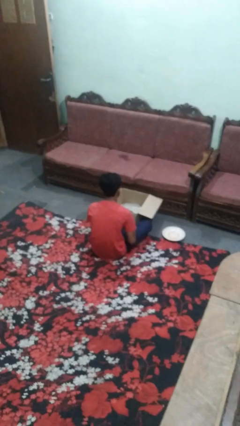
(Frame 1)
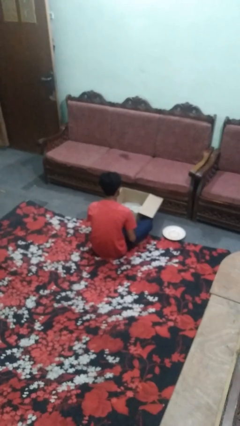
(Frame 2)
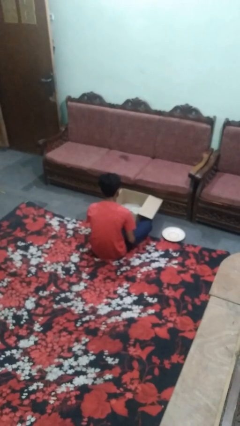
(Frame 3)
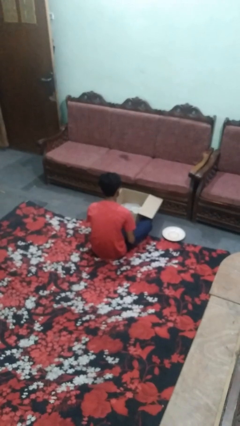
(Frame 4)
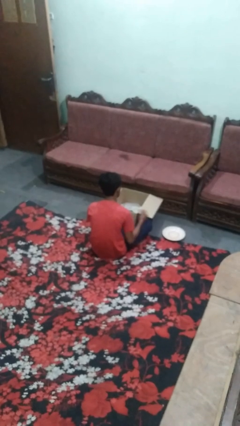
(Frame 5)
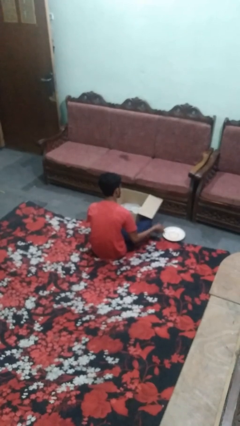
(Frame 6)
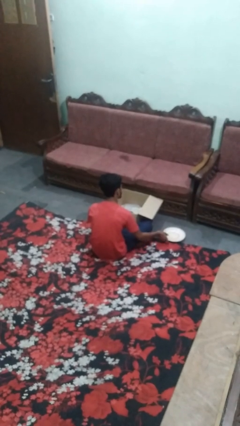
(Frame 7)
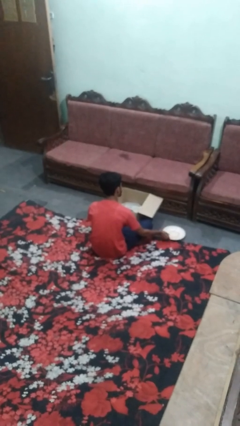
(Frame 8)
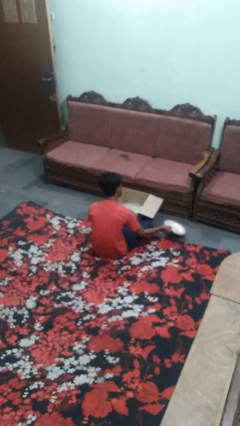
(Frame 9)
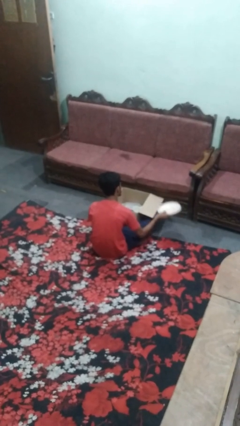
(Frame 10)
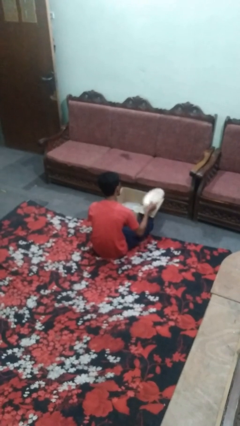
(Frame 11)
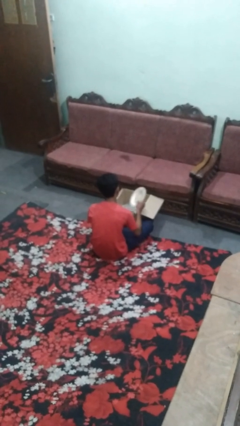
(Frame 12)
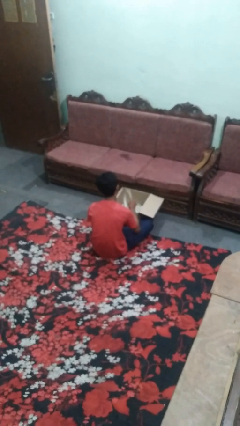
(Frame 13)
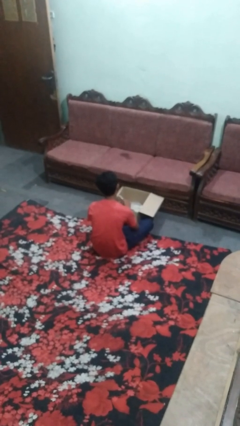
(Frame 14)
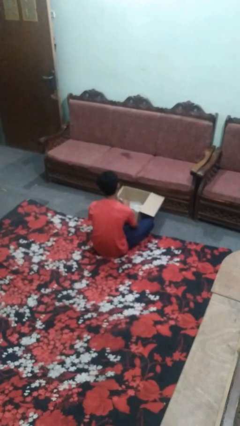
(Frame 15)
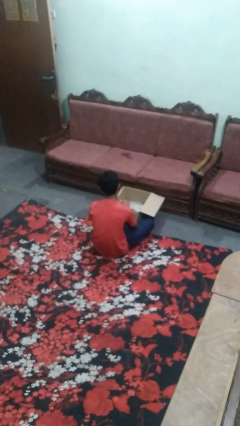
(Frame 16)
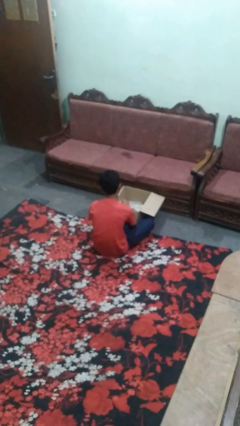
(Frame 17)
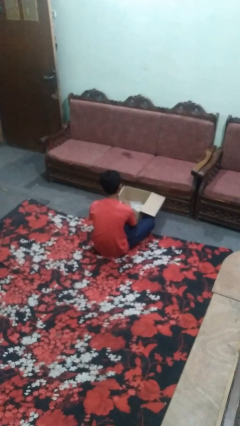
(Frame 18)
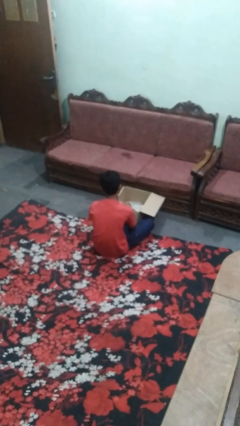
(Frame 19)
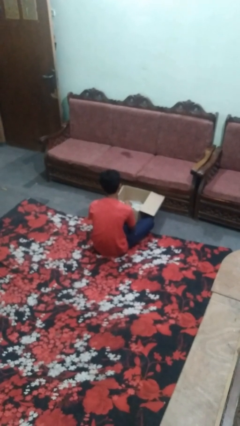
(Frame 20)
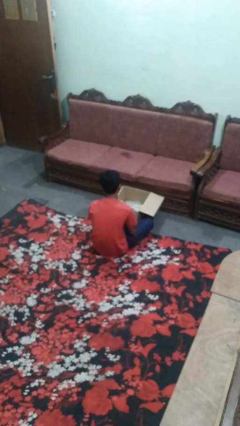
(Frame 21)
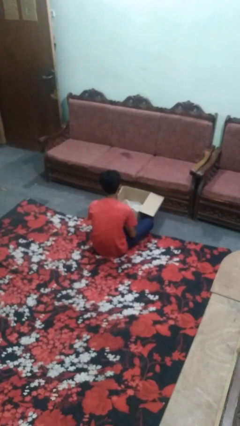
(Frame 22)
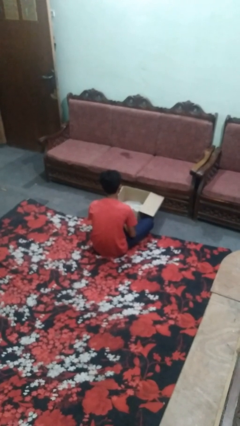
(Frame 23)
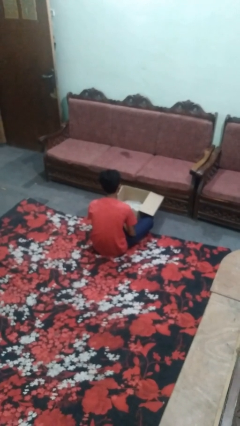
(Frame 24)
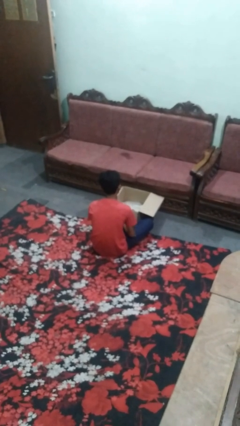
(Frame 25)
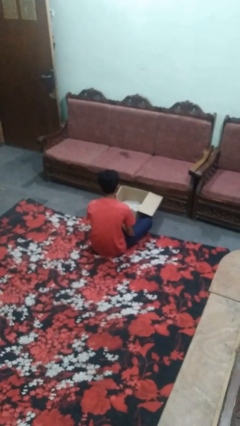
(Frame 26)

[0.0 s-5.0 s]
person puts object into box

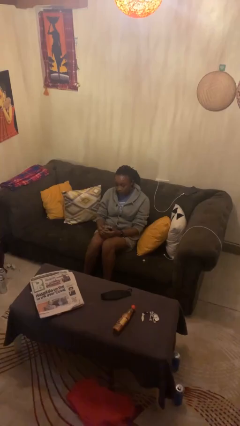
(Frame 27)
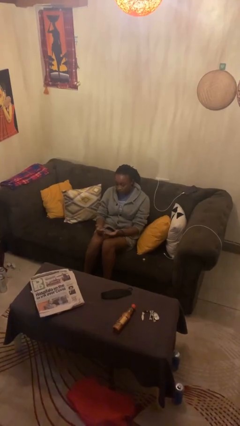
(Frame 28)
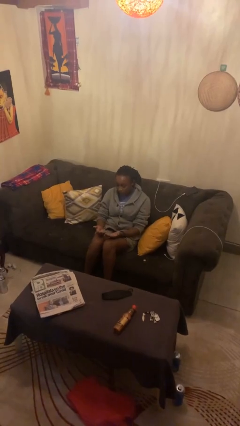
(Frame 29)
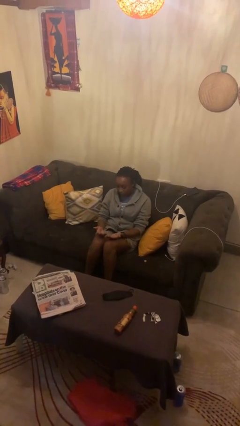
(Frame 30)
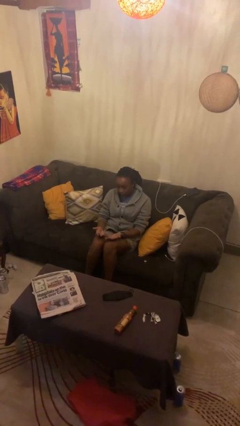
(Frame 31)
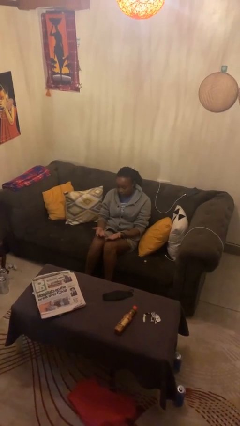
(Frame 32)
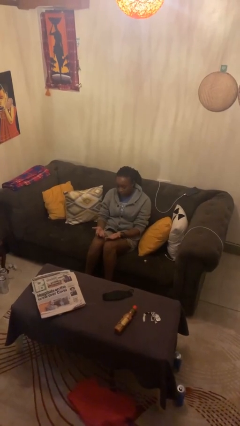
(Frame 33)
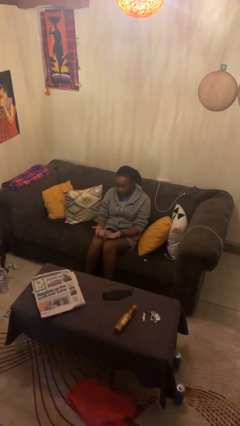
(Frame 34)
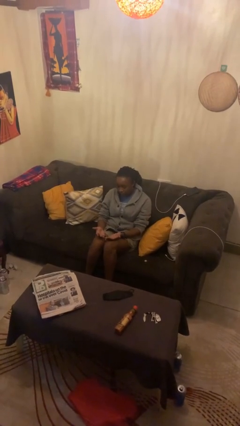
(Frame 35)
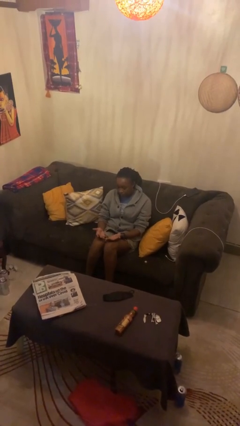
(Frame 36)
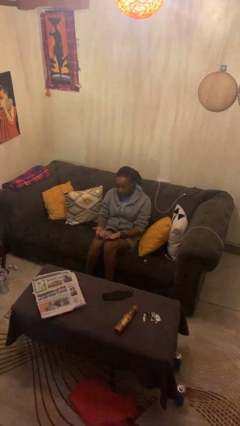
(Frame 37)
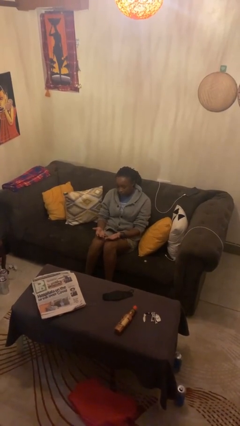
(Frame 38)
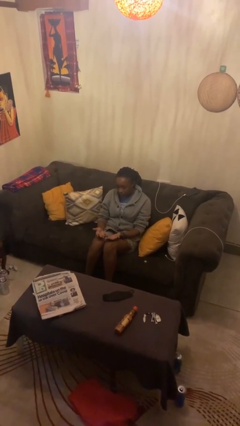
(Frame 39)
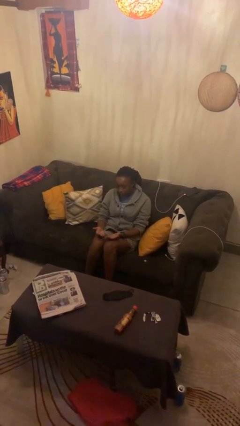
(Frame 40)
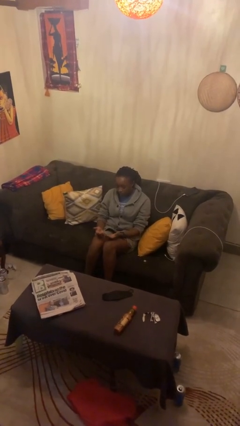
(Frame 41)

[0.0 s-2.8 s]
person looks at hands in lap

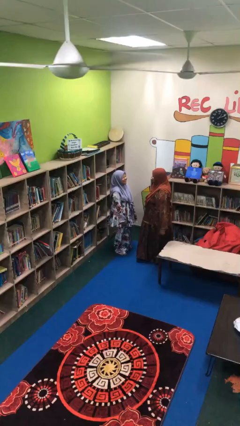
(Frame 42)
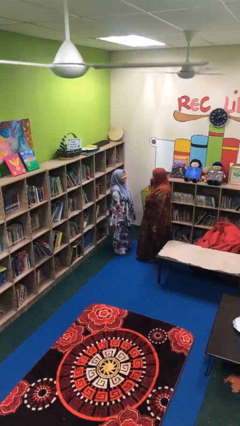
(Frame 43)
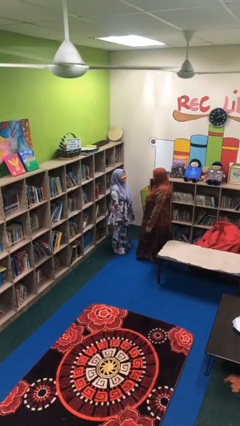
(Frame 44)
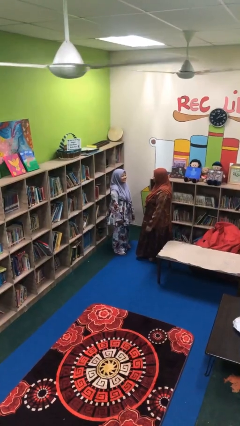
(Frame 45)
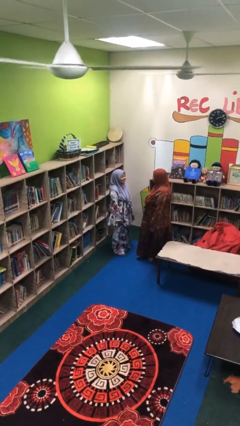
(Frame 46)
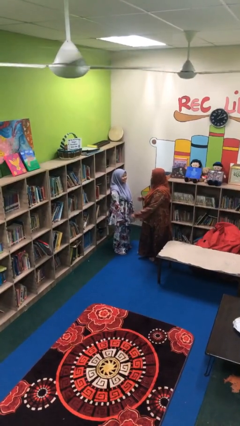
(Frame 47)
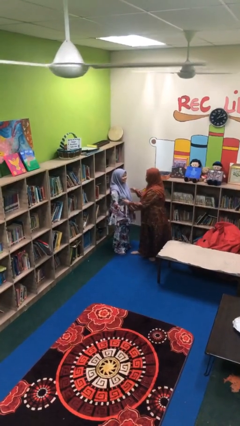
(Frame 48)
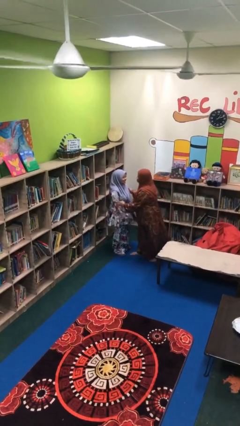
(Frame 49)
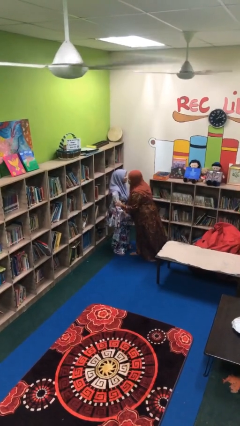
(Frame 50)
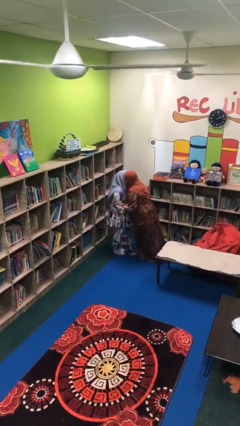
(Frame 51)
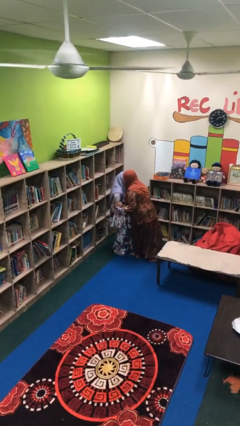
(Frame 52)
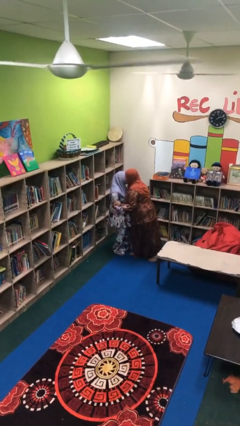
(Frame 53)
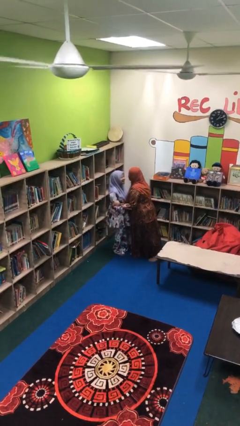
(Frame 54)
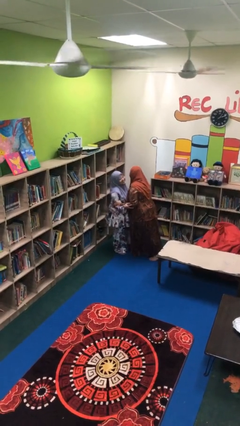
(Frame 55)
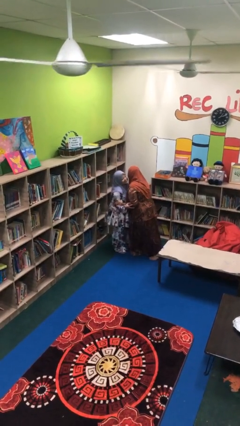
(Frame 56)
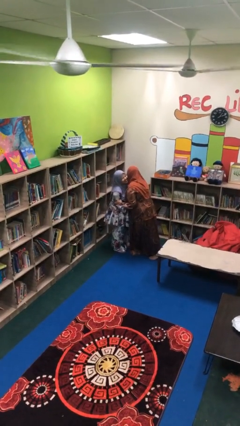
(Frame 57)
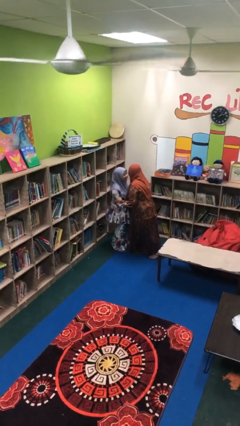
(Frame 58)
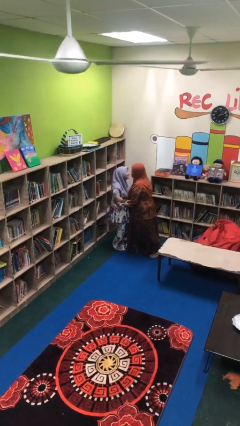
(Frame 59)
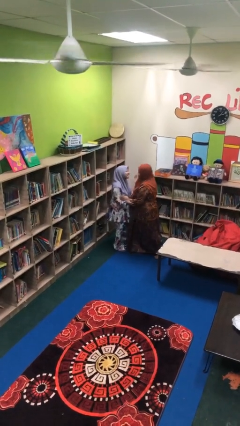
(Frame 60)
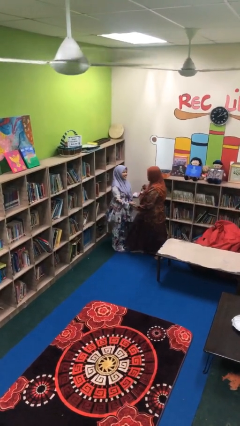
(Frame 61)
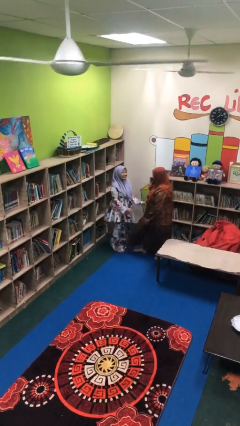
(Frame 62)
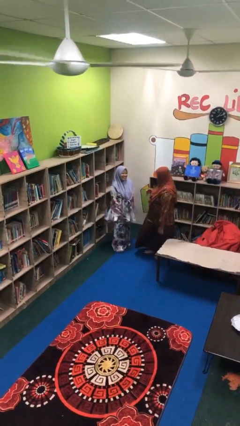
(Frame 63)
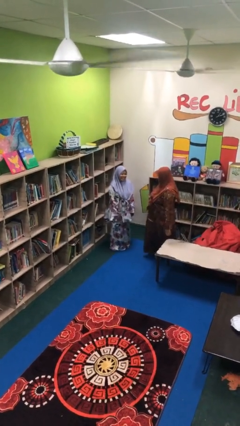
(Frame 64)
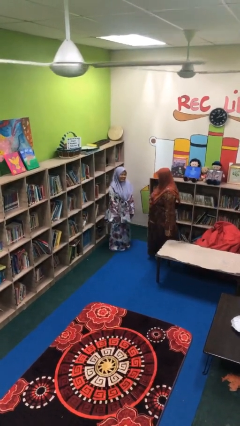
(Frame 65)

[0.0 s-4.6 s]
person embraces person

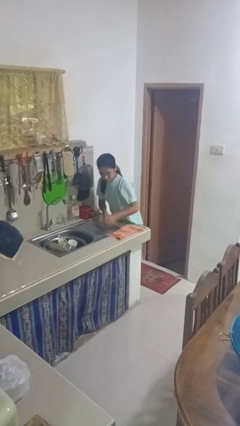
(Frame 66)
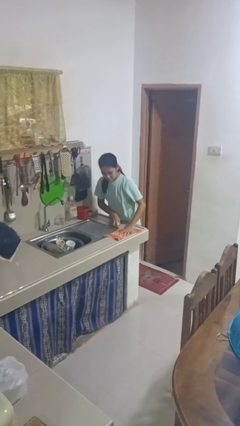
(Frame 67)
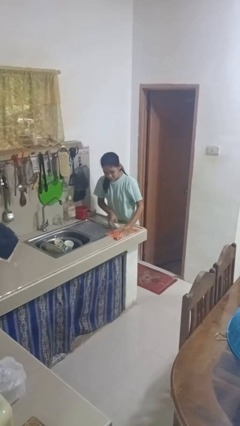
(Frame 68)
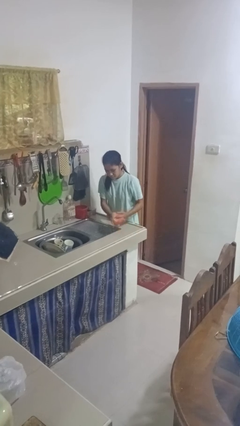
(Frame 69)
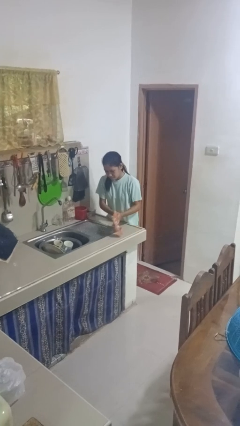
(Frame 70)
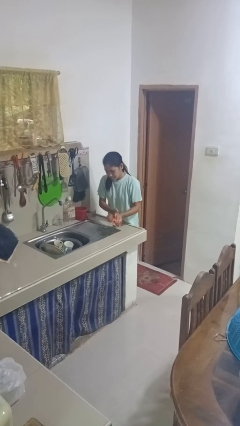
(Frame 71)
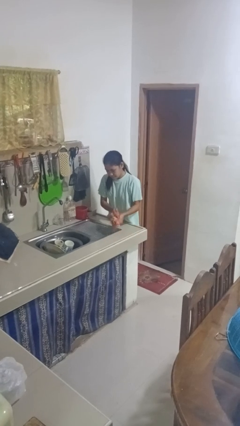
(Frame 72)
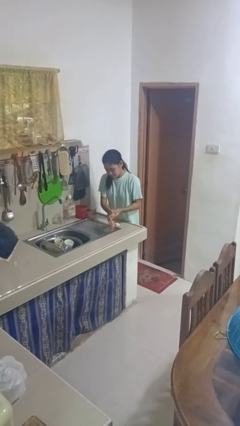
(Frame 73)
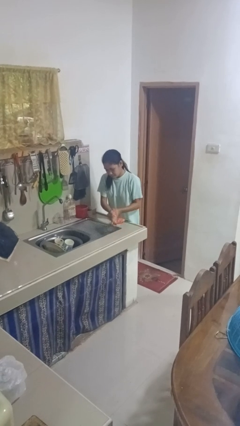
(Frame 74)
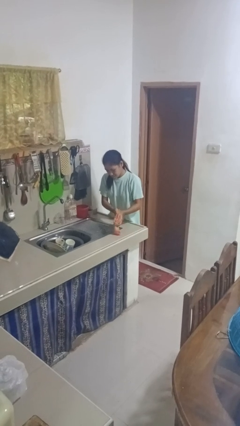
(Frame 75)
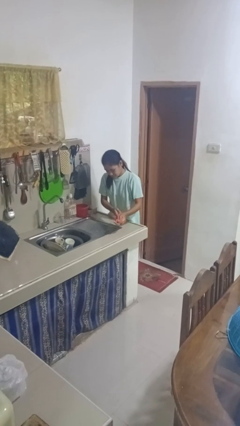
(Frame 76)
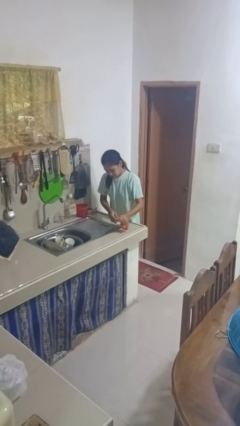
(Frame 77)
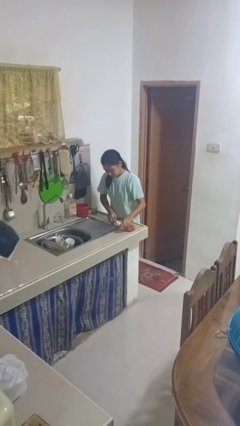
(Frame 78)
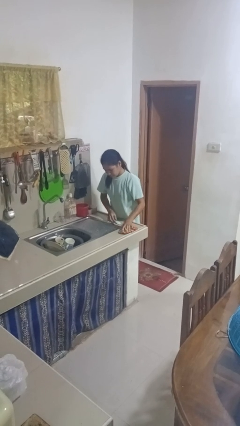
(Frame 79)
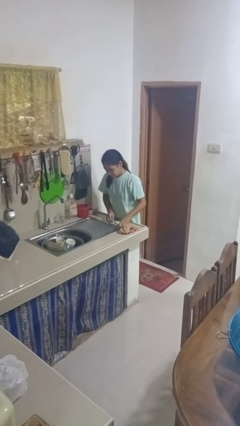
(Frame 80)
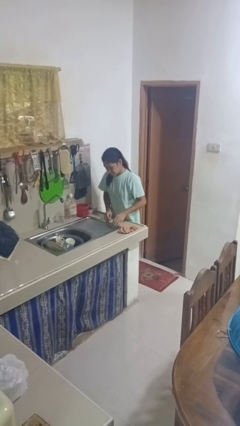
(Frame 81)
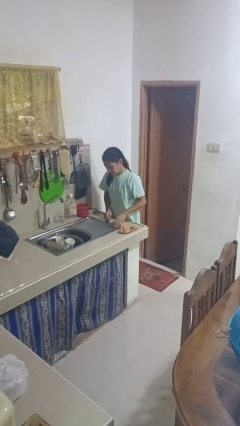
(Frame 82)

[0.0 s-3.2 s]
person dries hands with towel

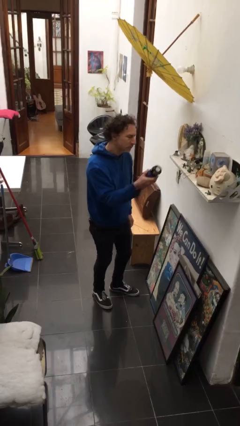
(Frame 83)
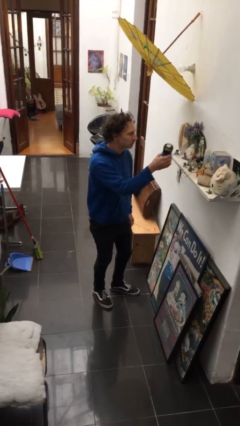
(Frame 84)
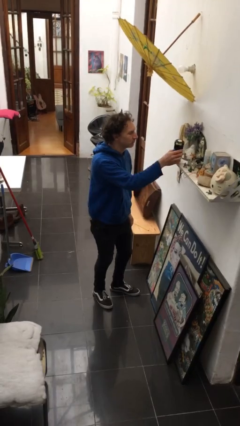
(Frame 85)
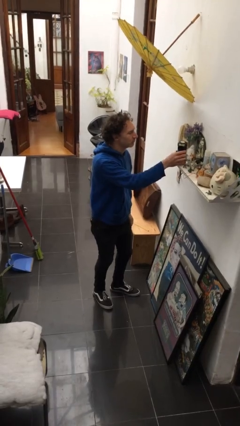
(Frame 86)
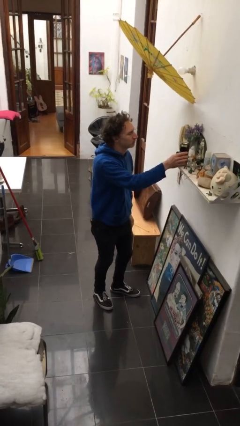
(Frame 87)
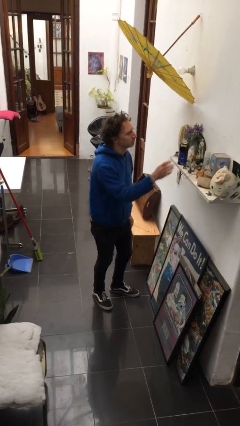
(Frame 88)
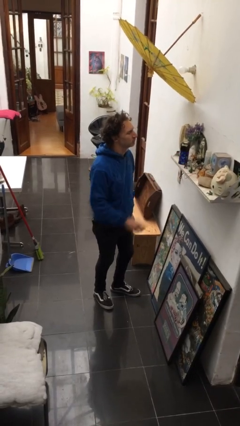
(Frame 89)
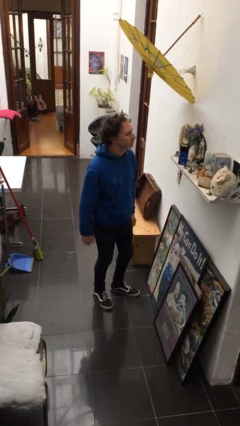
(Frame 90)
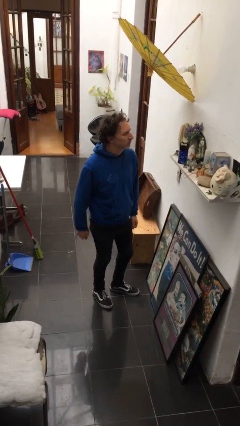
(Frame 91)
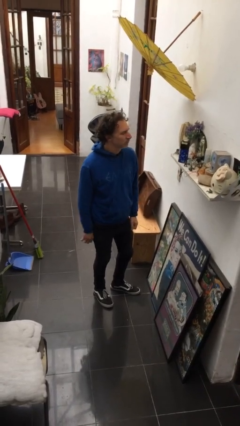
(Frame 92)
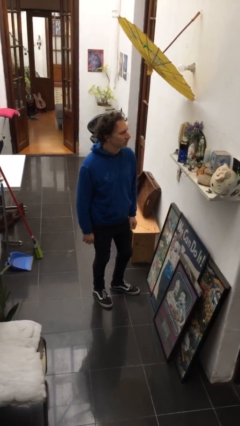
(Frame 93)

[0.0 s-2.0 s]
person puts down object on shelf
